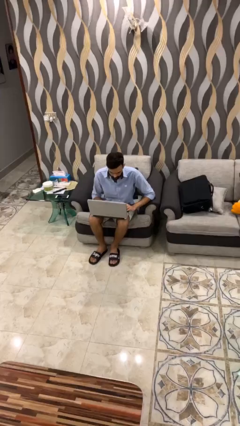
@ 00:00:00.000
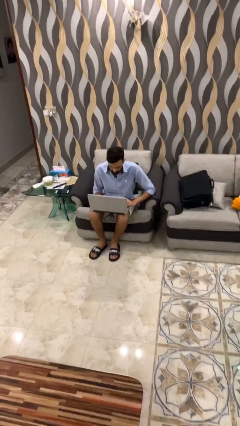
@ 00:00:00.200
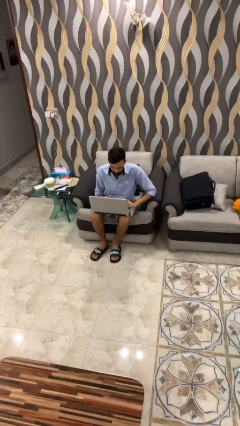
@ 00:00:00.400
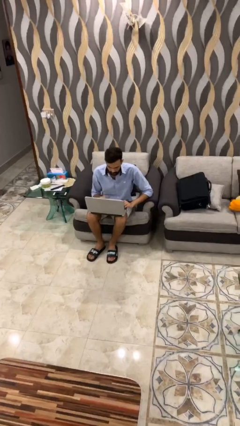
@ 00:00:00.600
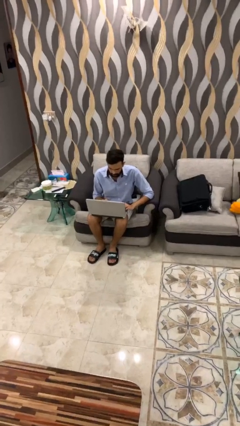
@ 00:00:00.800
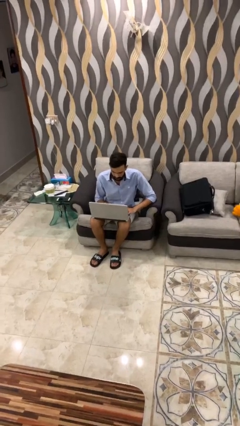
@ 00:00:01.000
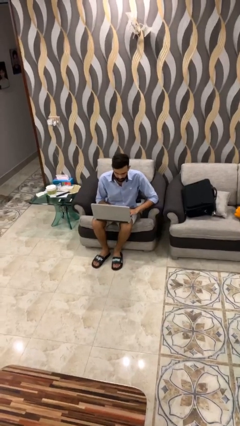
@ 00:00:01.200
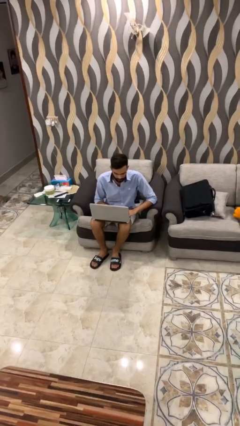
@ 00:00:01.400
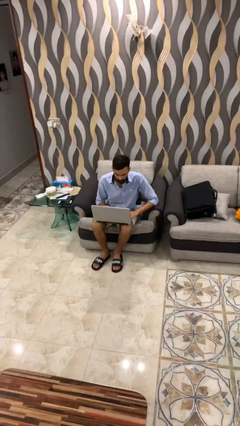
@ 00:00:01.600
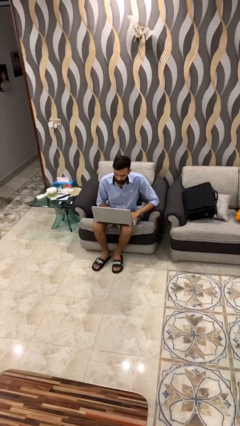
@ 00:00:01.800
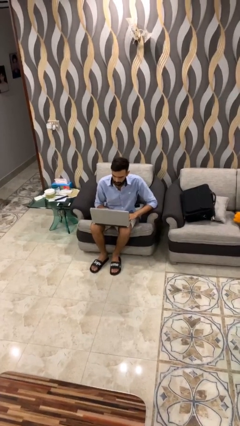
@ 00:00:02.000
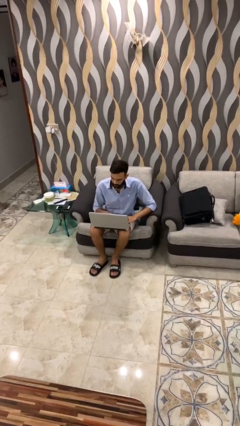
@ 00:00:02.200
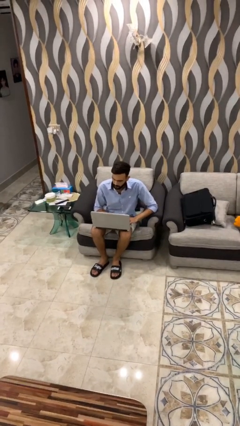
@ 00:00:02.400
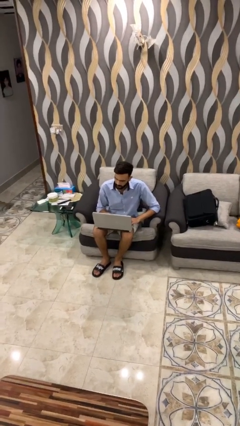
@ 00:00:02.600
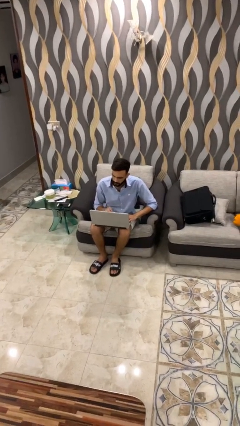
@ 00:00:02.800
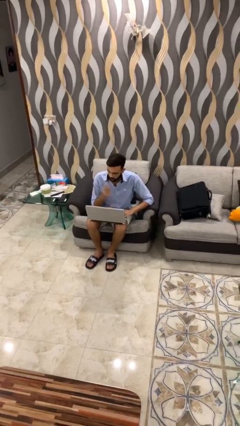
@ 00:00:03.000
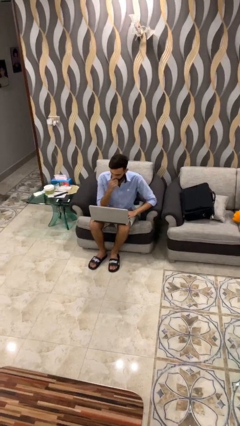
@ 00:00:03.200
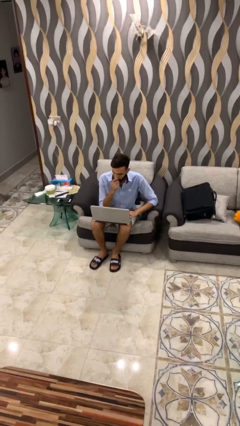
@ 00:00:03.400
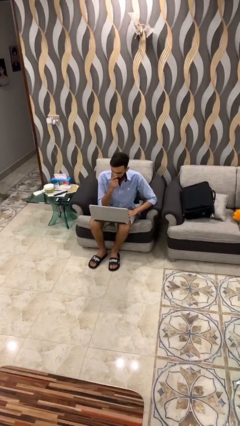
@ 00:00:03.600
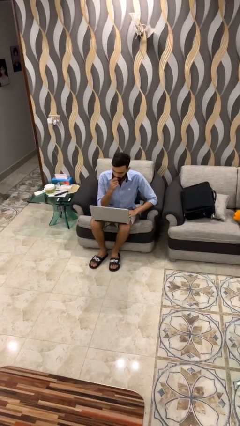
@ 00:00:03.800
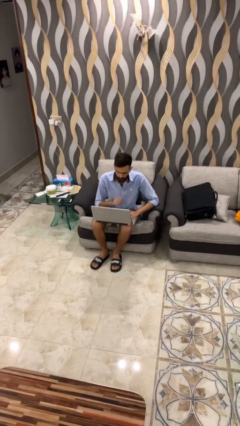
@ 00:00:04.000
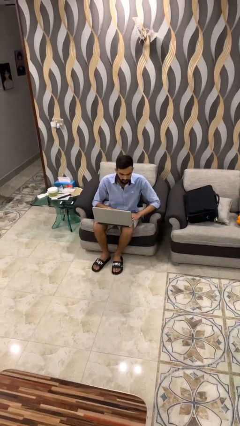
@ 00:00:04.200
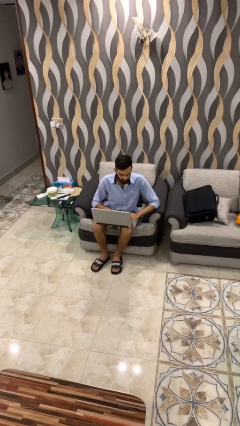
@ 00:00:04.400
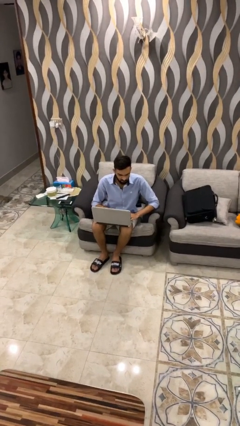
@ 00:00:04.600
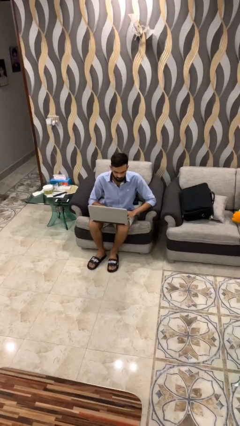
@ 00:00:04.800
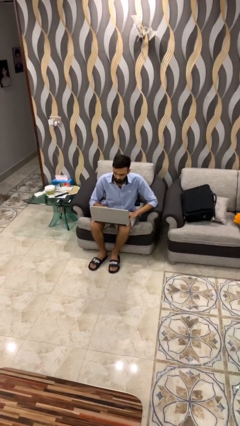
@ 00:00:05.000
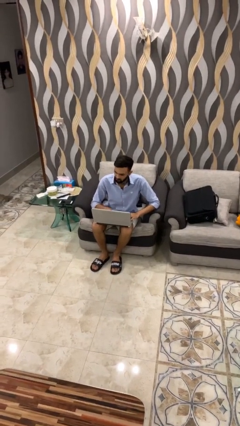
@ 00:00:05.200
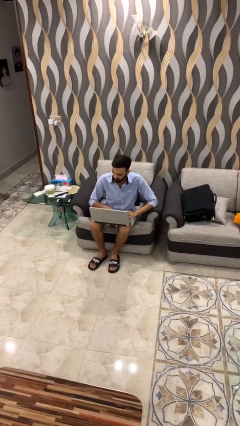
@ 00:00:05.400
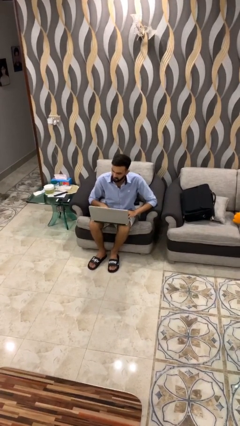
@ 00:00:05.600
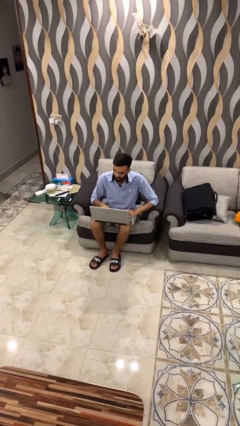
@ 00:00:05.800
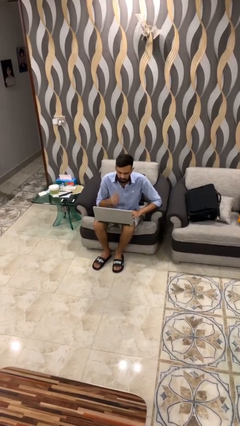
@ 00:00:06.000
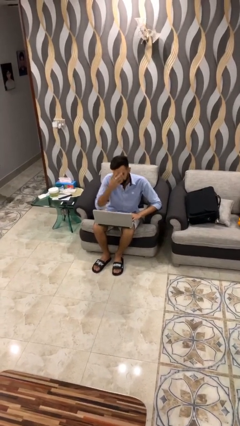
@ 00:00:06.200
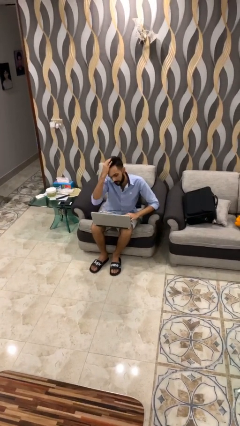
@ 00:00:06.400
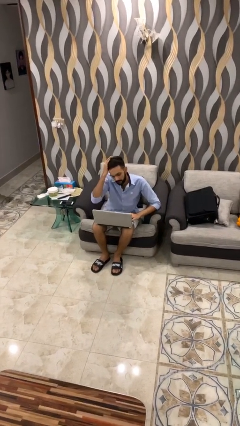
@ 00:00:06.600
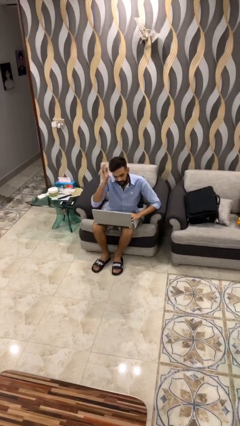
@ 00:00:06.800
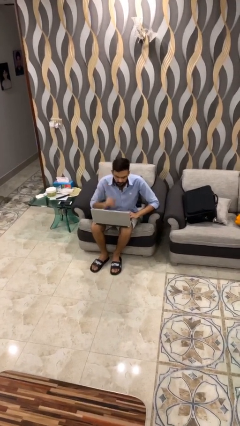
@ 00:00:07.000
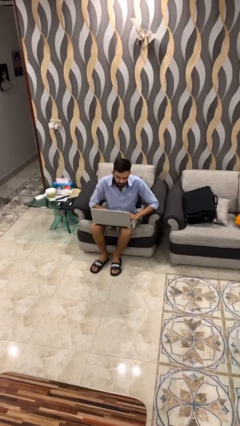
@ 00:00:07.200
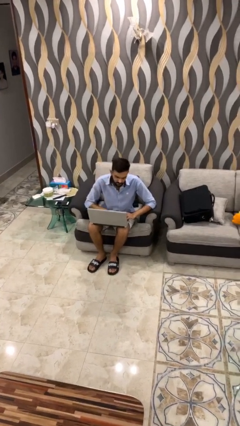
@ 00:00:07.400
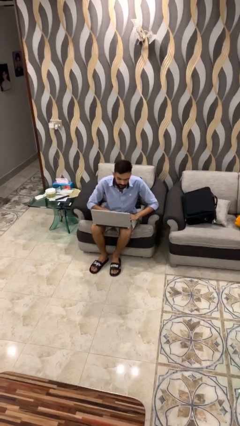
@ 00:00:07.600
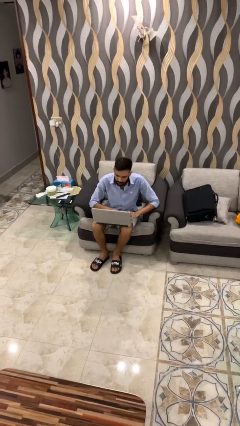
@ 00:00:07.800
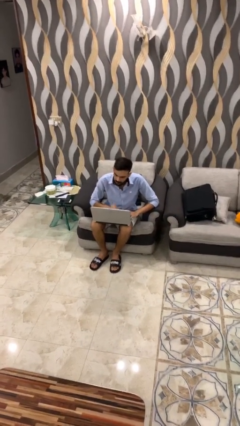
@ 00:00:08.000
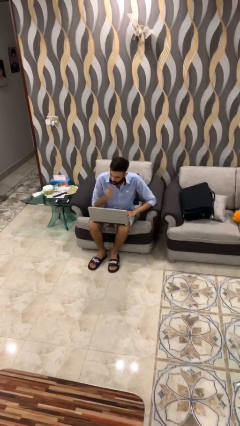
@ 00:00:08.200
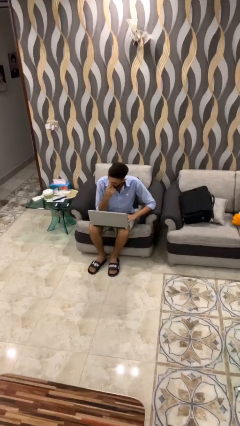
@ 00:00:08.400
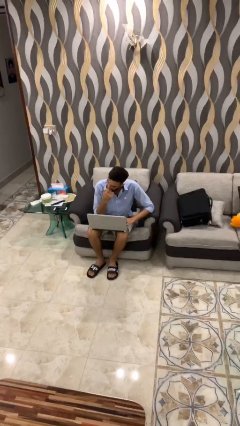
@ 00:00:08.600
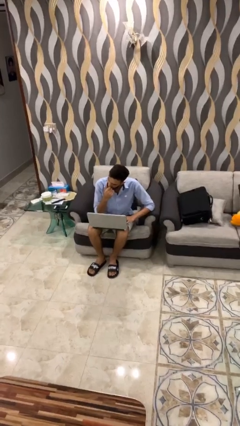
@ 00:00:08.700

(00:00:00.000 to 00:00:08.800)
person interacts with laptop

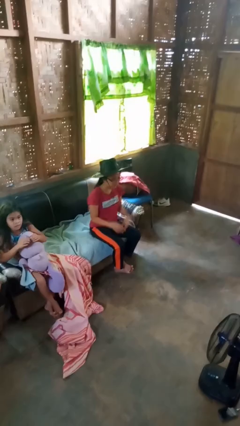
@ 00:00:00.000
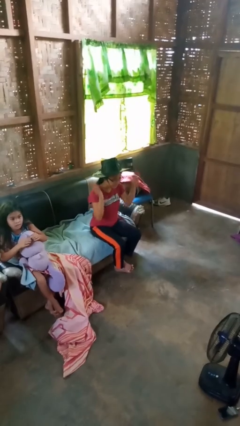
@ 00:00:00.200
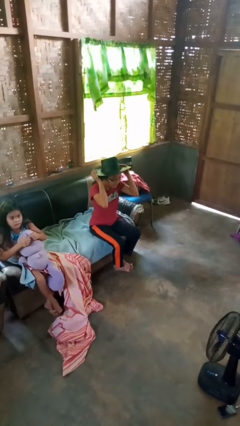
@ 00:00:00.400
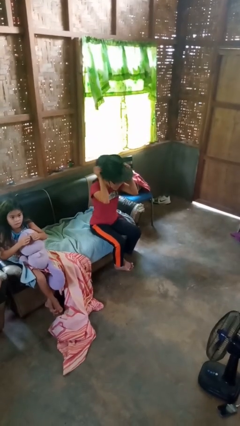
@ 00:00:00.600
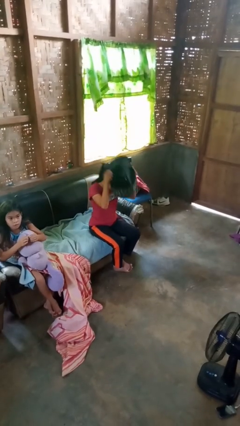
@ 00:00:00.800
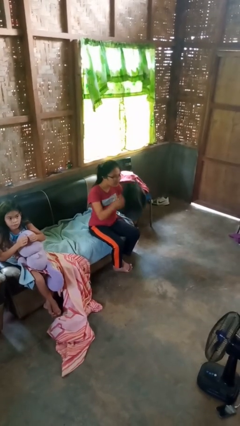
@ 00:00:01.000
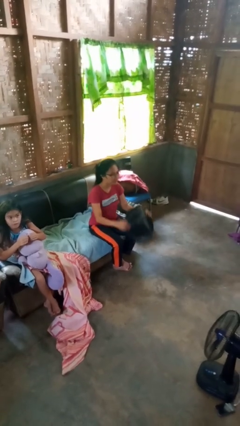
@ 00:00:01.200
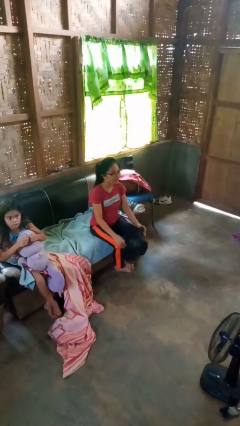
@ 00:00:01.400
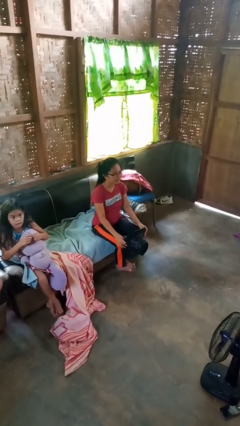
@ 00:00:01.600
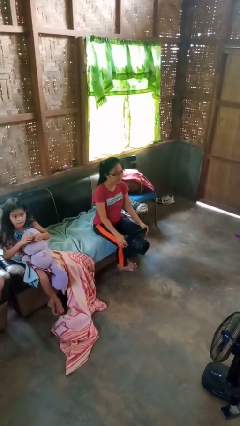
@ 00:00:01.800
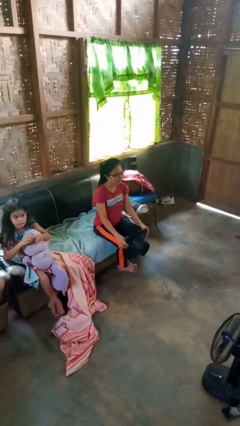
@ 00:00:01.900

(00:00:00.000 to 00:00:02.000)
person takes off hat

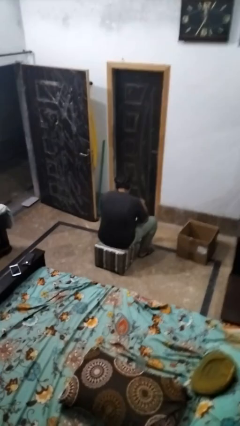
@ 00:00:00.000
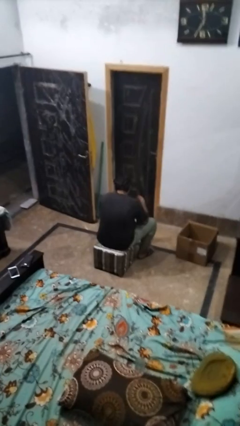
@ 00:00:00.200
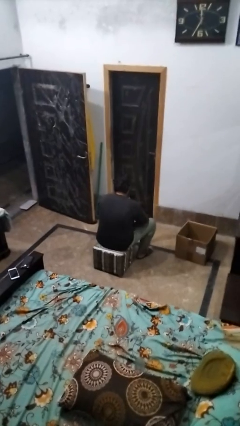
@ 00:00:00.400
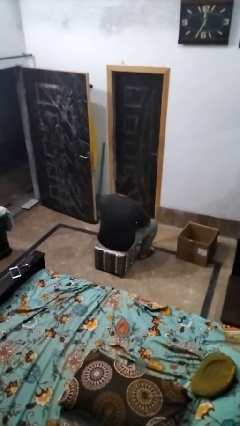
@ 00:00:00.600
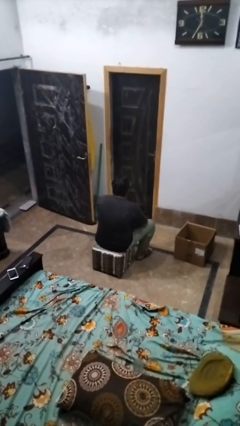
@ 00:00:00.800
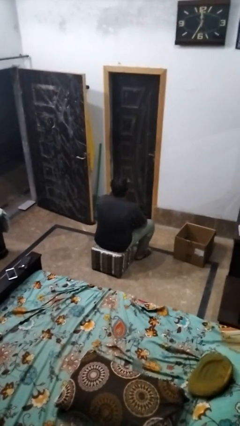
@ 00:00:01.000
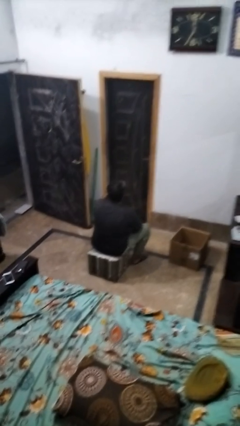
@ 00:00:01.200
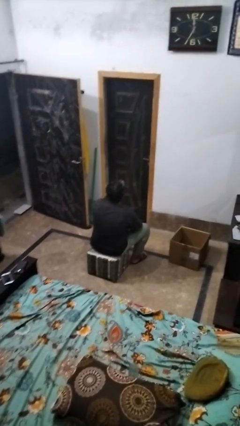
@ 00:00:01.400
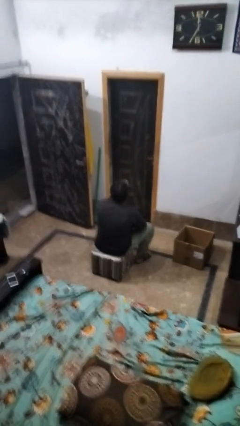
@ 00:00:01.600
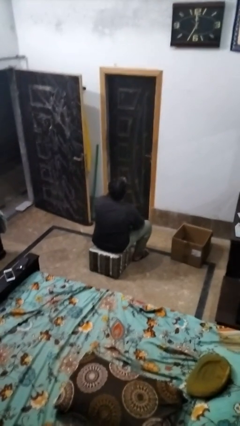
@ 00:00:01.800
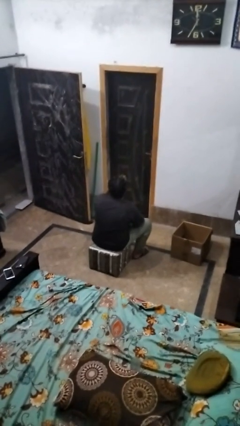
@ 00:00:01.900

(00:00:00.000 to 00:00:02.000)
person drinks from mug

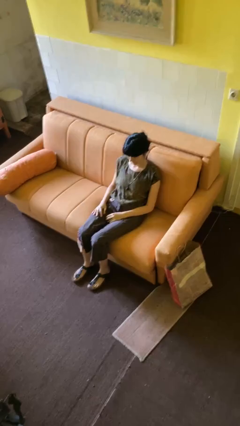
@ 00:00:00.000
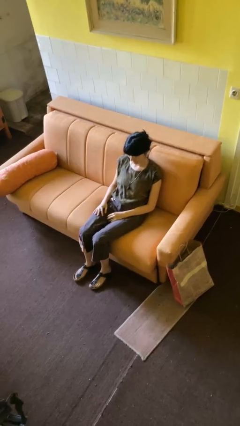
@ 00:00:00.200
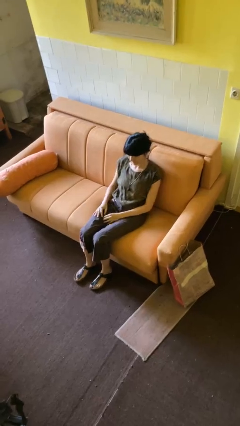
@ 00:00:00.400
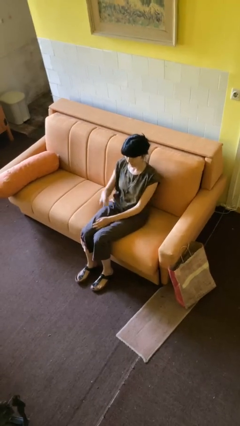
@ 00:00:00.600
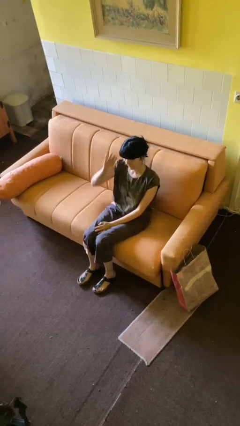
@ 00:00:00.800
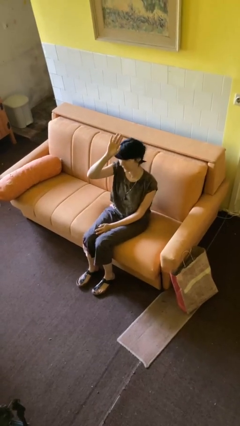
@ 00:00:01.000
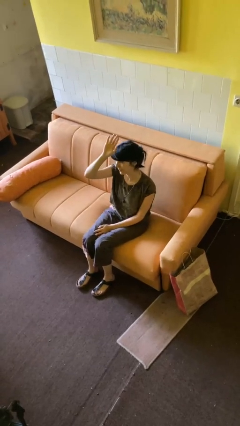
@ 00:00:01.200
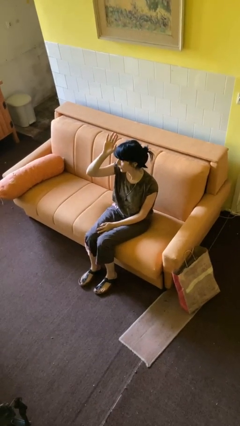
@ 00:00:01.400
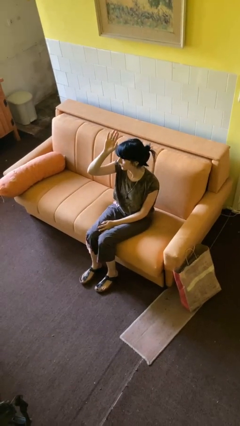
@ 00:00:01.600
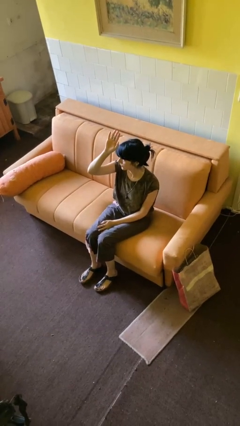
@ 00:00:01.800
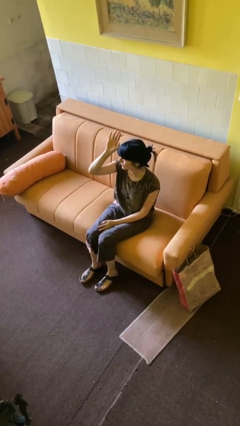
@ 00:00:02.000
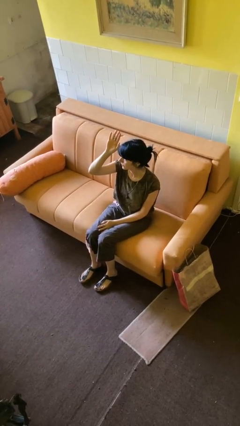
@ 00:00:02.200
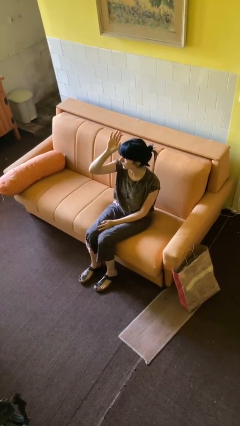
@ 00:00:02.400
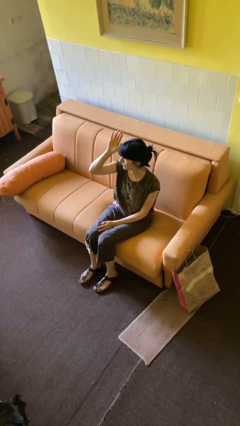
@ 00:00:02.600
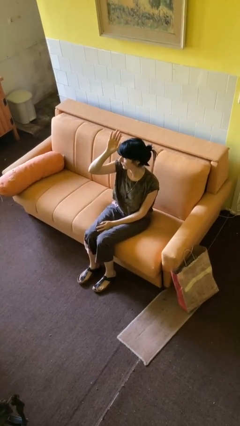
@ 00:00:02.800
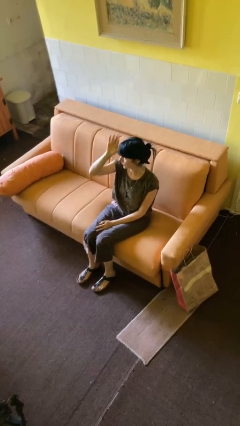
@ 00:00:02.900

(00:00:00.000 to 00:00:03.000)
person gestures raise hand

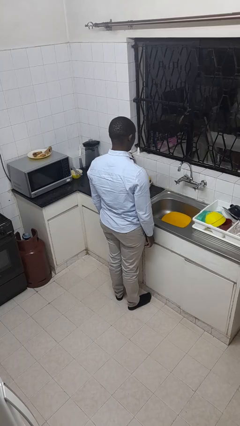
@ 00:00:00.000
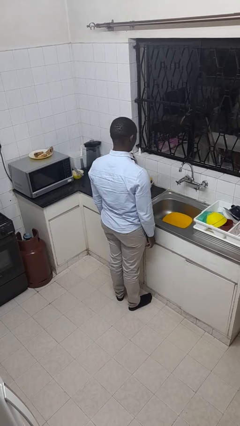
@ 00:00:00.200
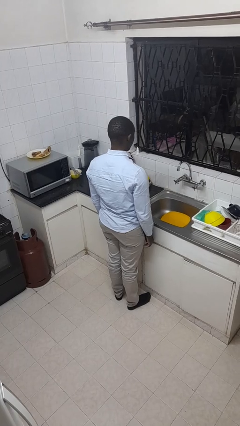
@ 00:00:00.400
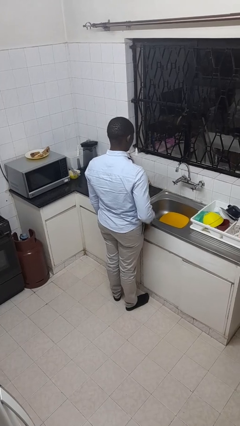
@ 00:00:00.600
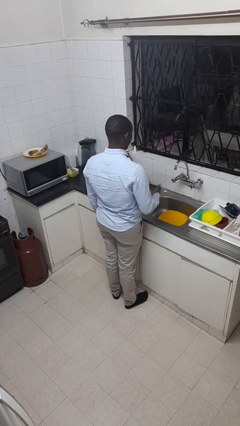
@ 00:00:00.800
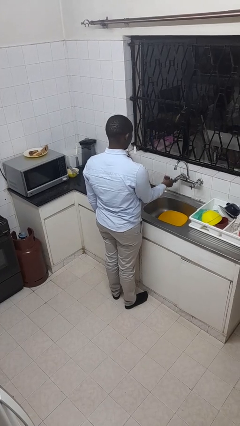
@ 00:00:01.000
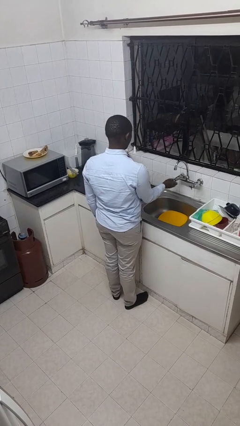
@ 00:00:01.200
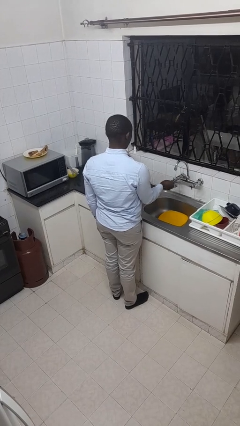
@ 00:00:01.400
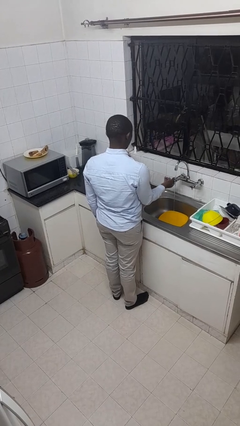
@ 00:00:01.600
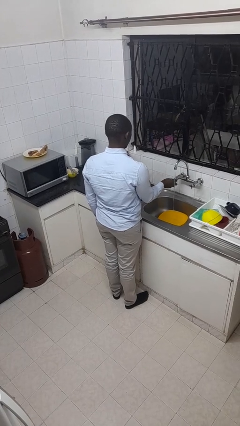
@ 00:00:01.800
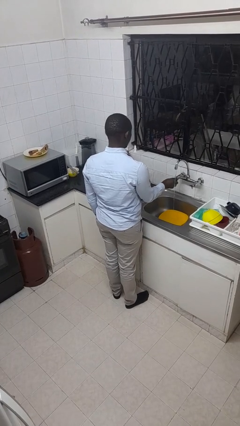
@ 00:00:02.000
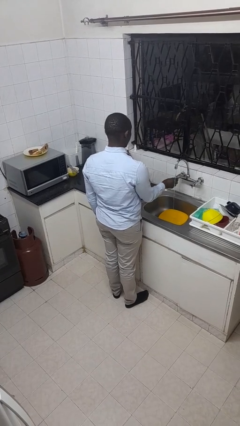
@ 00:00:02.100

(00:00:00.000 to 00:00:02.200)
person turns on faucet
